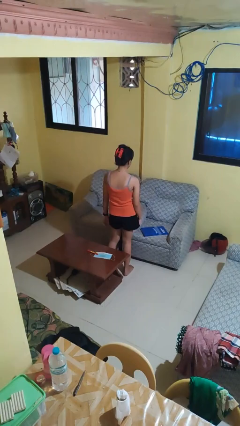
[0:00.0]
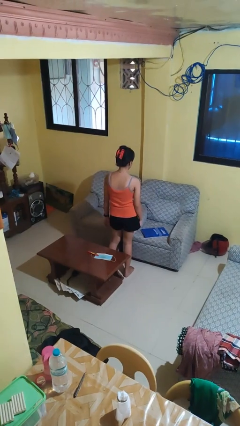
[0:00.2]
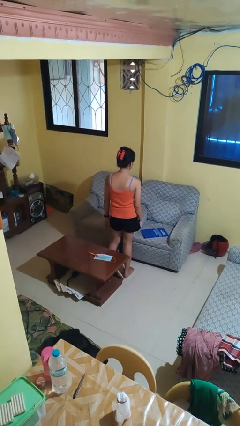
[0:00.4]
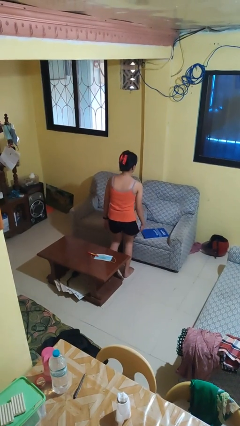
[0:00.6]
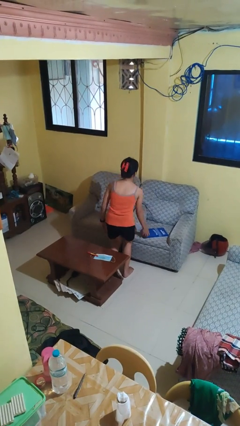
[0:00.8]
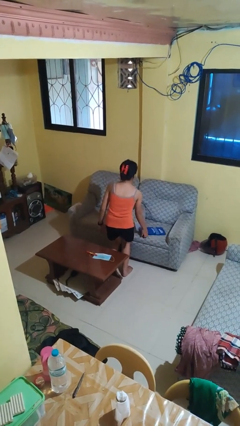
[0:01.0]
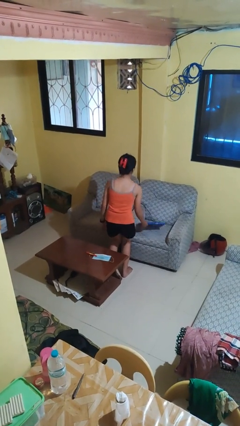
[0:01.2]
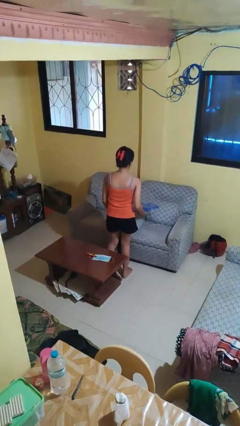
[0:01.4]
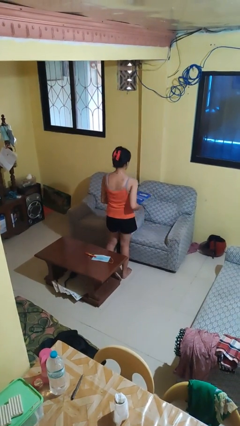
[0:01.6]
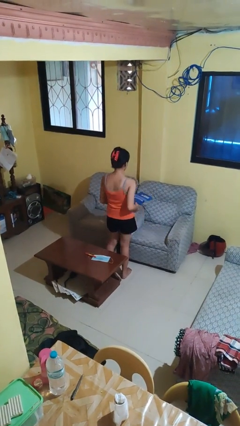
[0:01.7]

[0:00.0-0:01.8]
person picks up object from couch

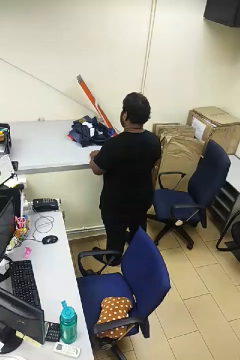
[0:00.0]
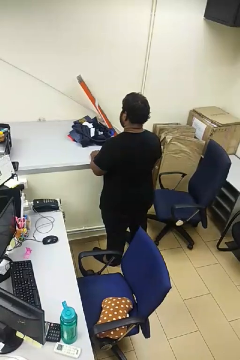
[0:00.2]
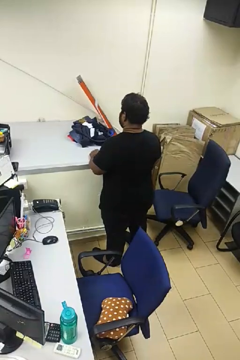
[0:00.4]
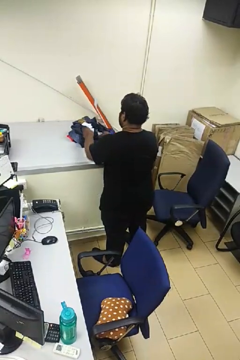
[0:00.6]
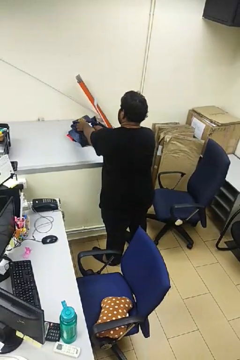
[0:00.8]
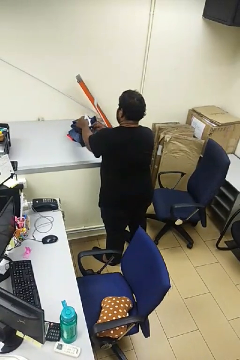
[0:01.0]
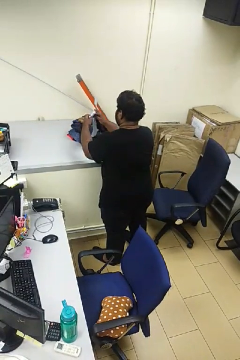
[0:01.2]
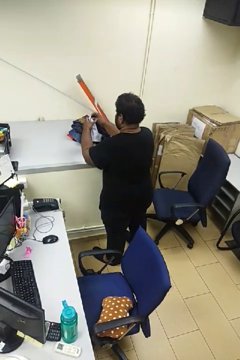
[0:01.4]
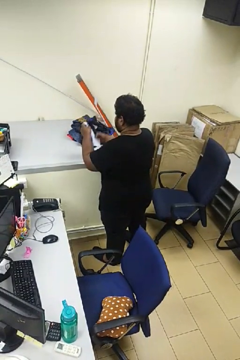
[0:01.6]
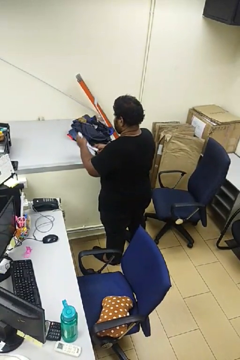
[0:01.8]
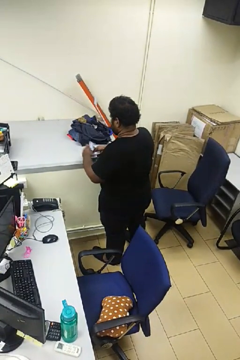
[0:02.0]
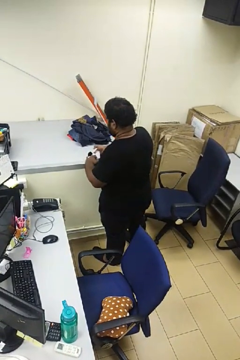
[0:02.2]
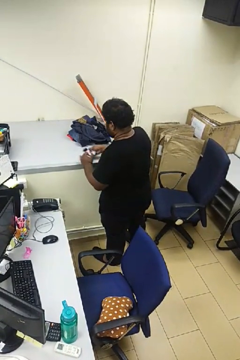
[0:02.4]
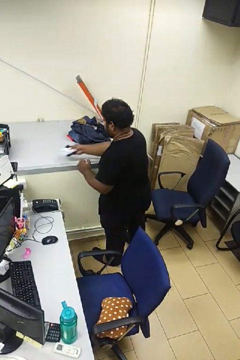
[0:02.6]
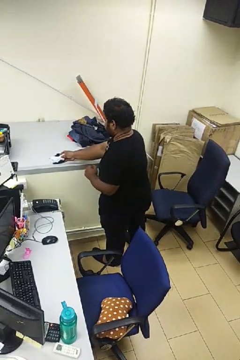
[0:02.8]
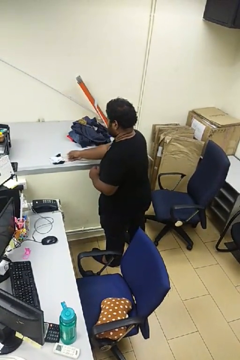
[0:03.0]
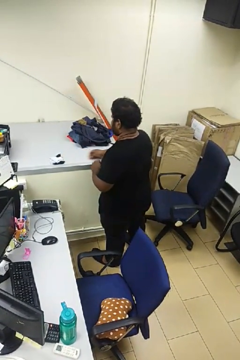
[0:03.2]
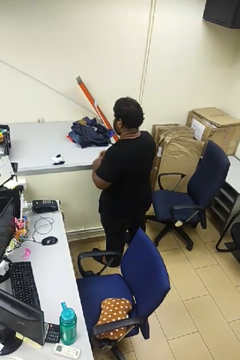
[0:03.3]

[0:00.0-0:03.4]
person folds socks

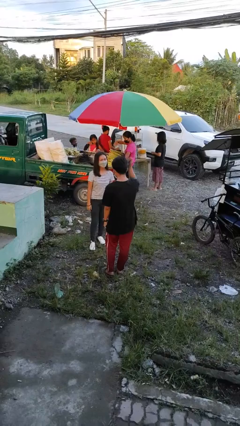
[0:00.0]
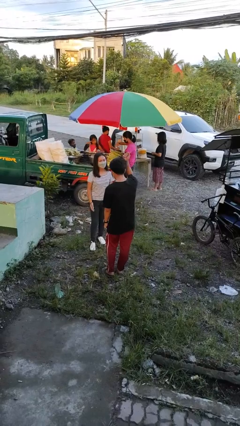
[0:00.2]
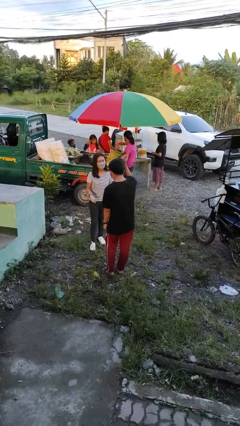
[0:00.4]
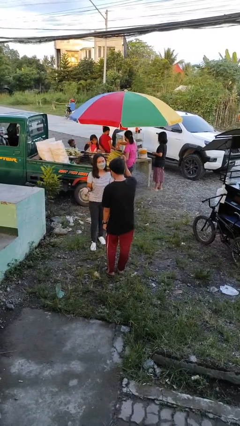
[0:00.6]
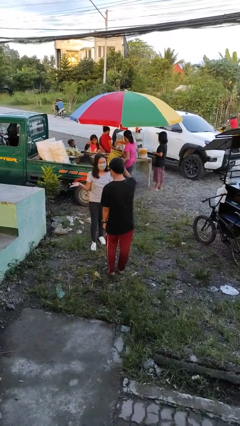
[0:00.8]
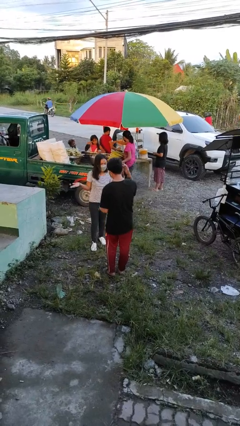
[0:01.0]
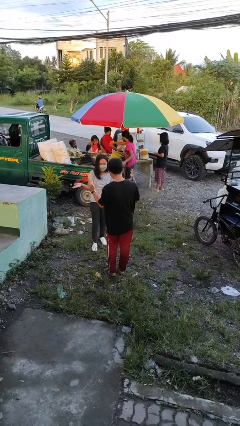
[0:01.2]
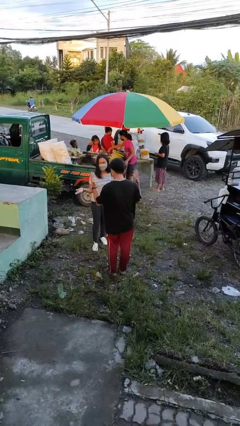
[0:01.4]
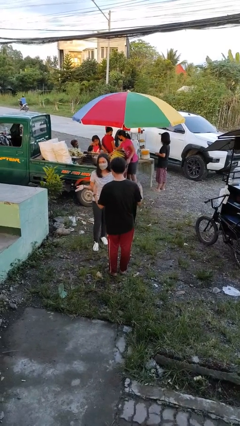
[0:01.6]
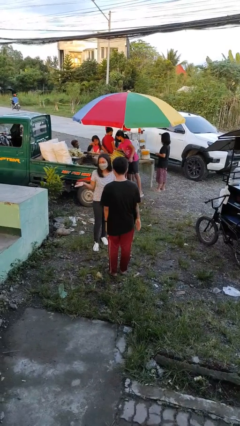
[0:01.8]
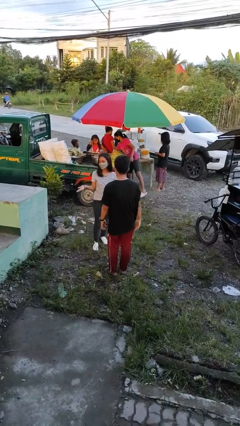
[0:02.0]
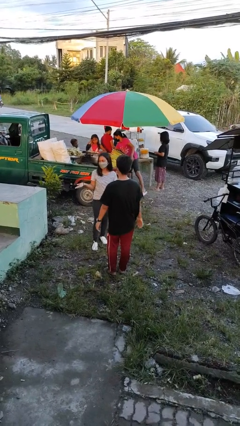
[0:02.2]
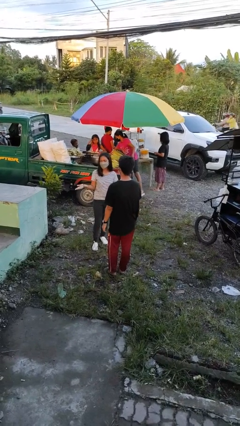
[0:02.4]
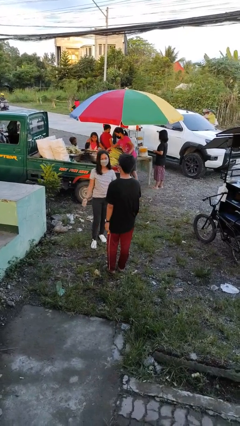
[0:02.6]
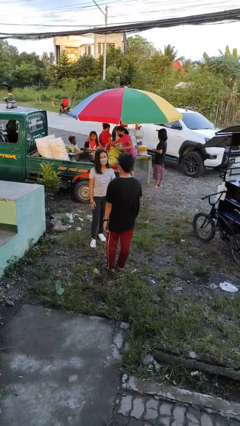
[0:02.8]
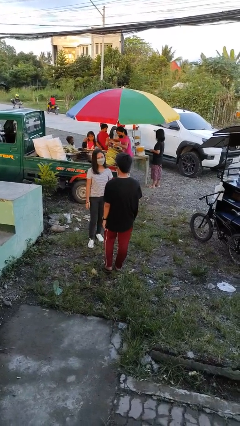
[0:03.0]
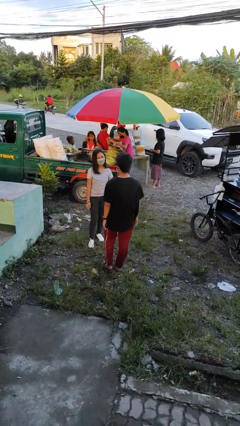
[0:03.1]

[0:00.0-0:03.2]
person talks to person

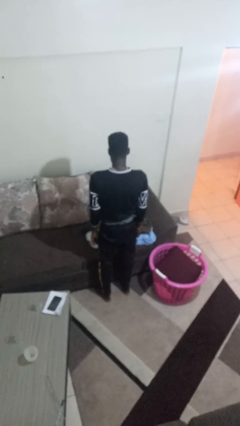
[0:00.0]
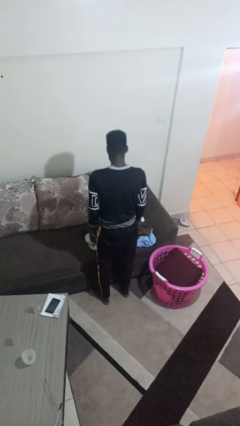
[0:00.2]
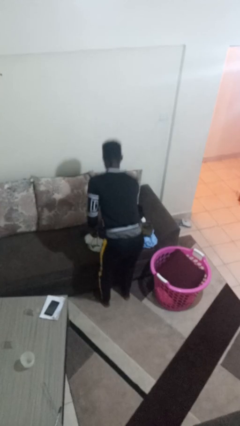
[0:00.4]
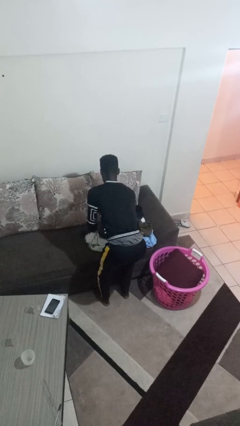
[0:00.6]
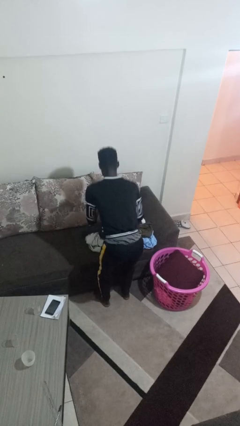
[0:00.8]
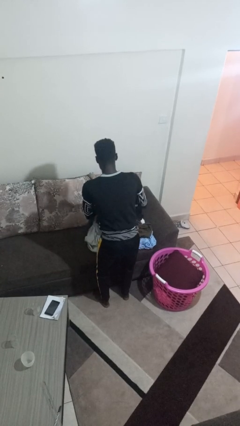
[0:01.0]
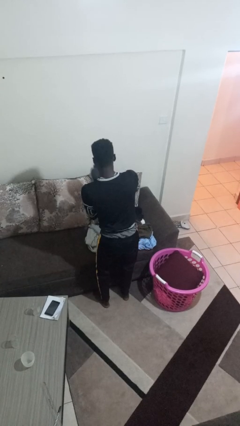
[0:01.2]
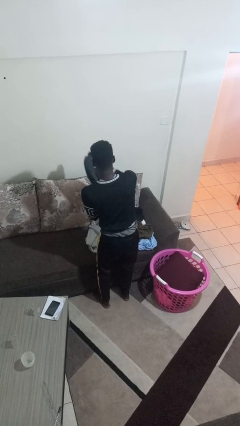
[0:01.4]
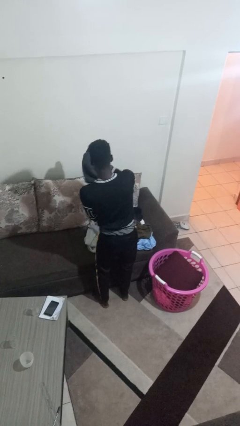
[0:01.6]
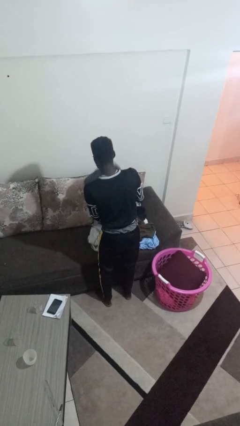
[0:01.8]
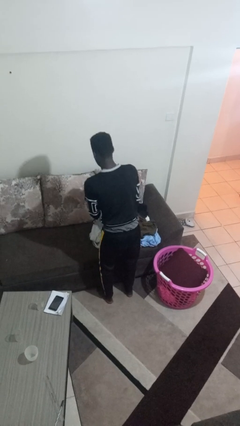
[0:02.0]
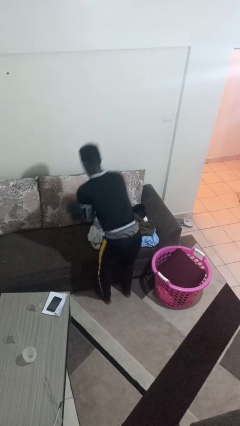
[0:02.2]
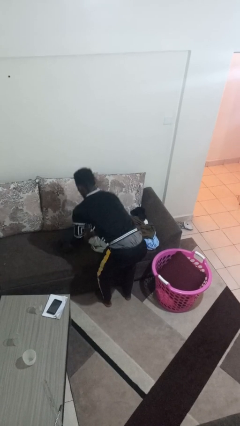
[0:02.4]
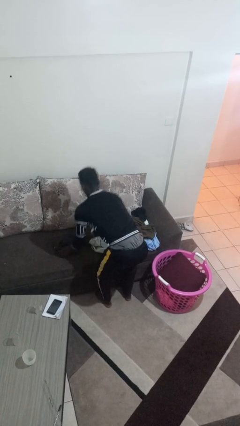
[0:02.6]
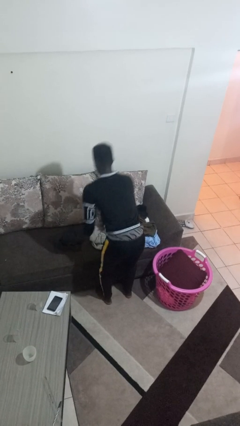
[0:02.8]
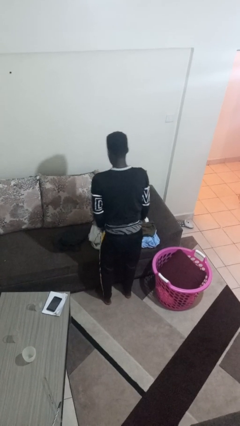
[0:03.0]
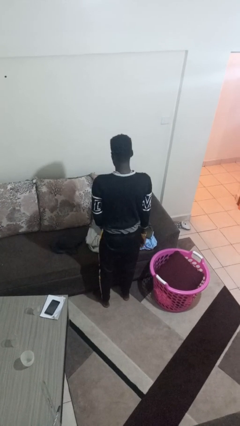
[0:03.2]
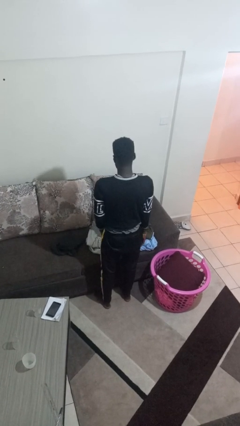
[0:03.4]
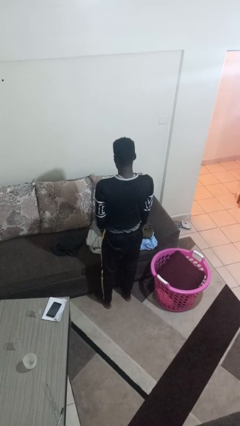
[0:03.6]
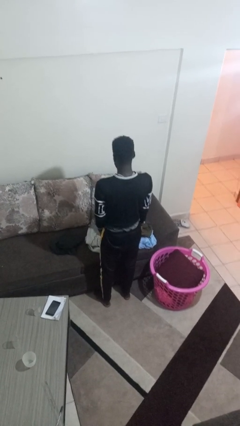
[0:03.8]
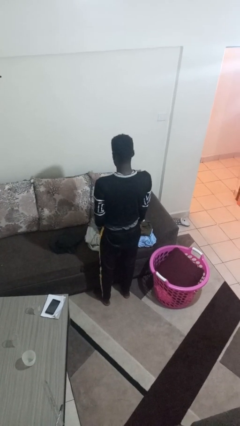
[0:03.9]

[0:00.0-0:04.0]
person folds pants

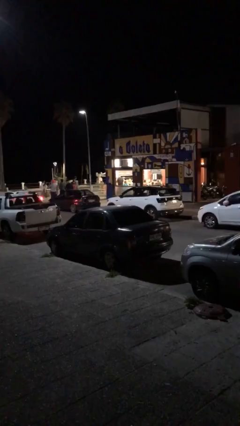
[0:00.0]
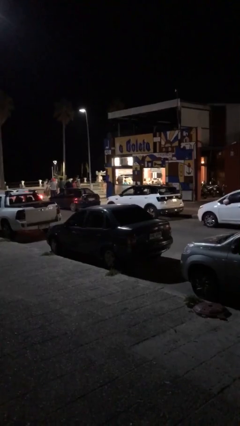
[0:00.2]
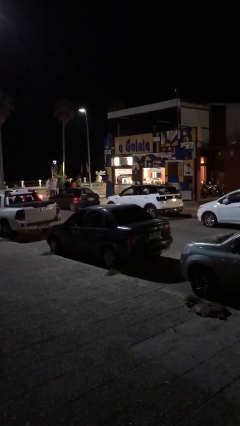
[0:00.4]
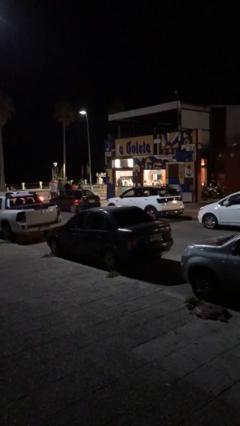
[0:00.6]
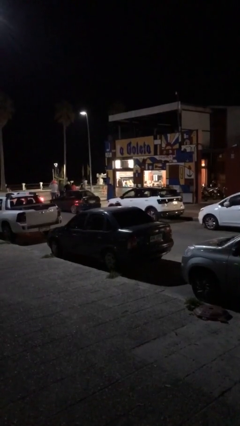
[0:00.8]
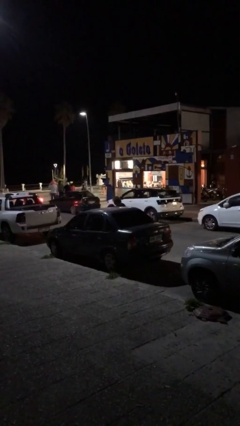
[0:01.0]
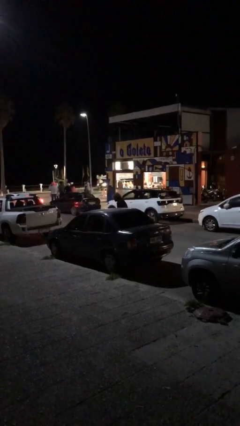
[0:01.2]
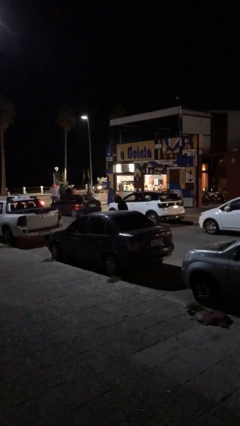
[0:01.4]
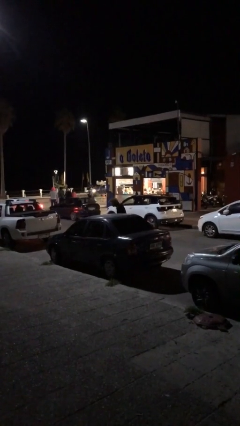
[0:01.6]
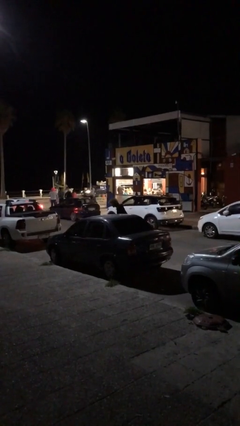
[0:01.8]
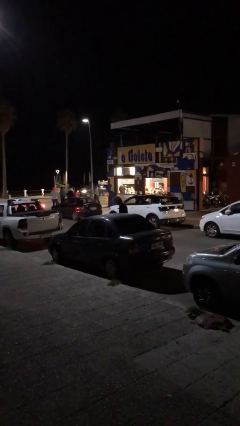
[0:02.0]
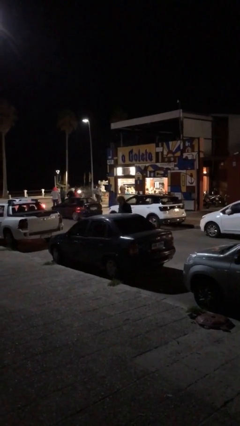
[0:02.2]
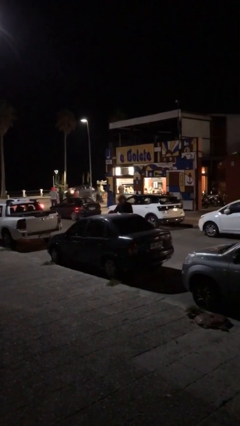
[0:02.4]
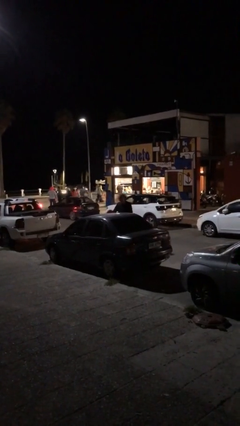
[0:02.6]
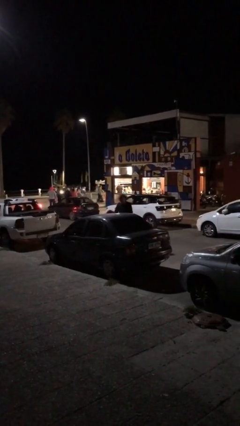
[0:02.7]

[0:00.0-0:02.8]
person exits car

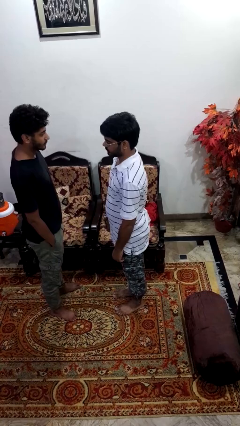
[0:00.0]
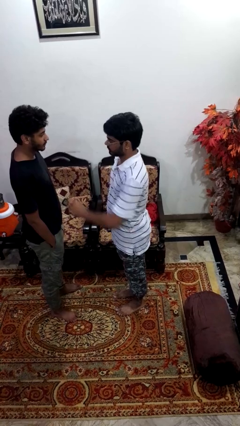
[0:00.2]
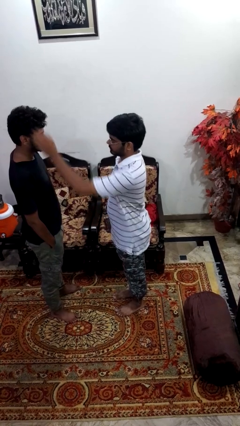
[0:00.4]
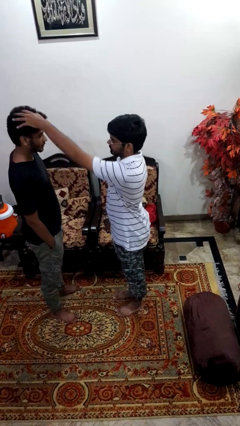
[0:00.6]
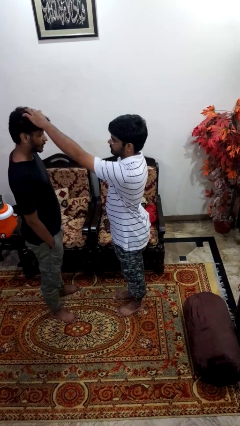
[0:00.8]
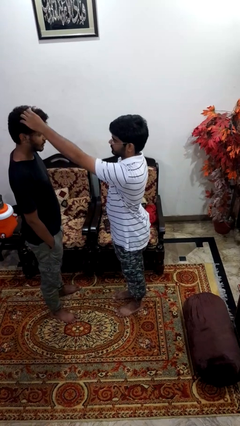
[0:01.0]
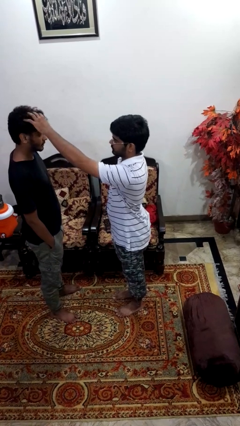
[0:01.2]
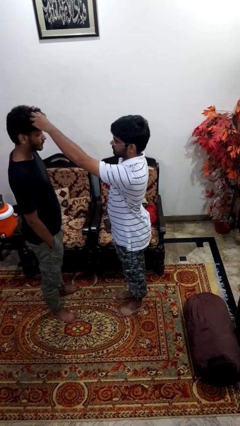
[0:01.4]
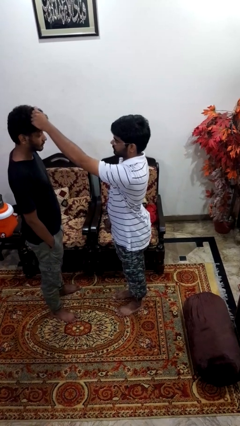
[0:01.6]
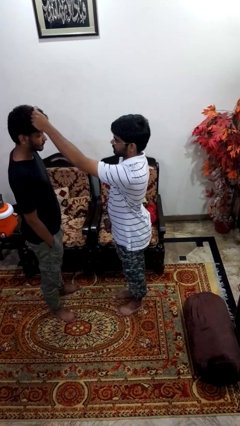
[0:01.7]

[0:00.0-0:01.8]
person grabs person by hair

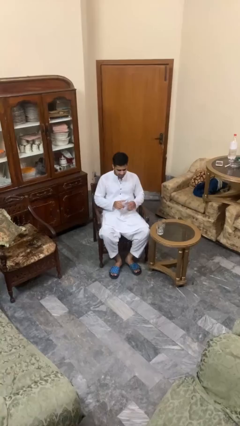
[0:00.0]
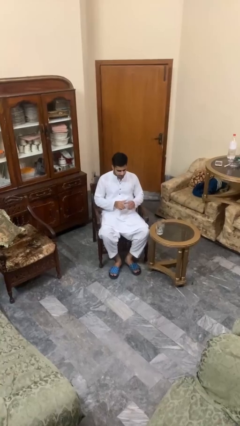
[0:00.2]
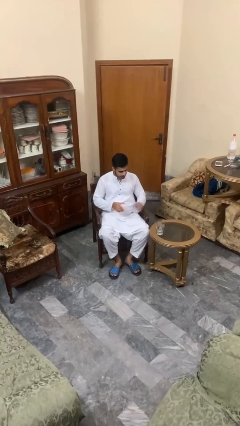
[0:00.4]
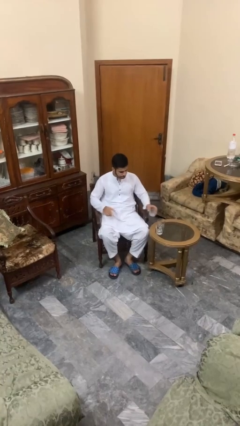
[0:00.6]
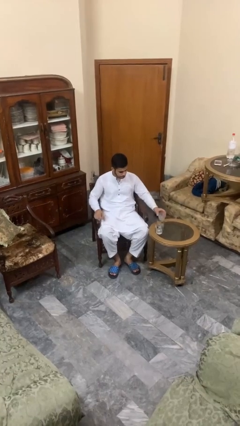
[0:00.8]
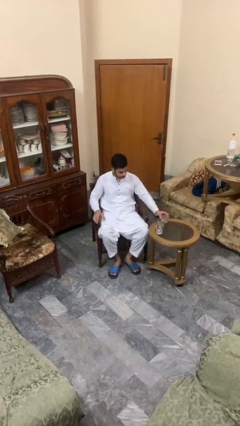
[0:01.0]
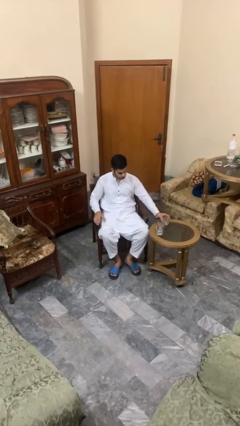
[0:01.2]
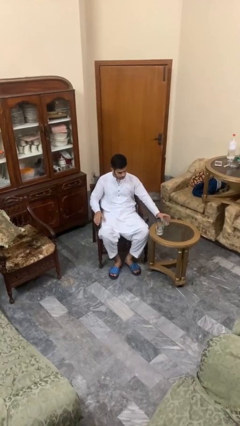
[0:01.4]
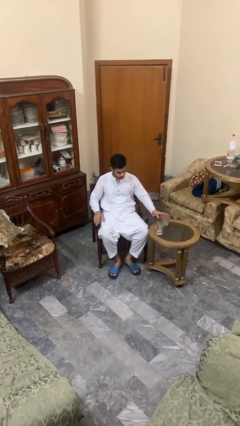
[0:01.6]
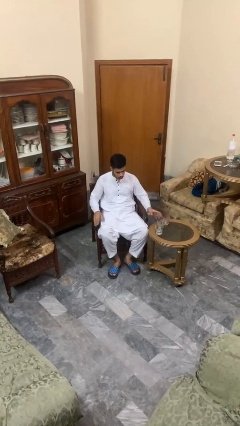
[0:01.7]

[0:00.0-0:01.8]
person puts down object on table
